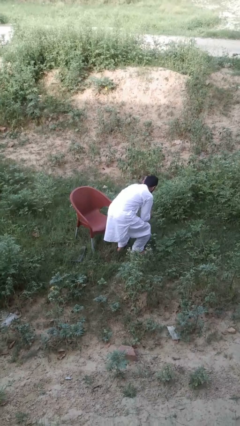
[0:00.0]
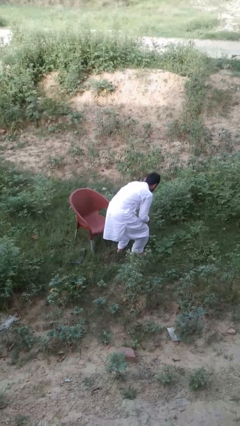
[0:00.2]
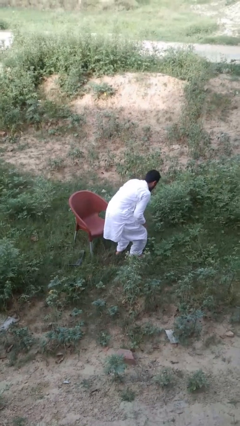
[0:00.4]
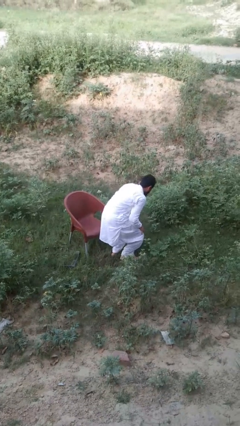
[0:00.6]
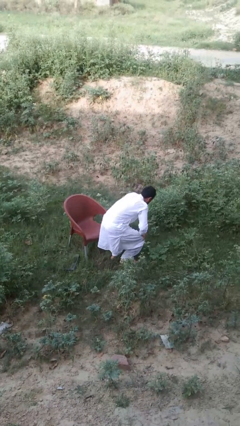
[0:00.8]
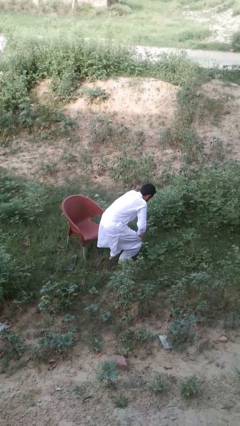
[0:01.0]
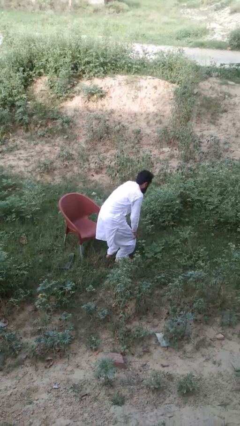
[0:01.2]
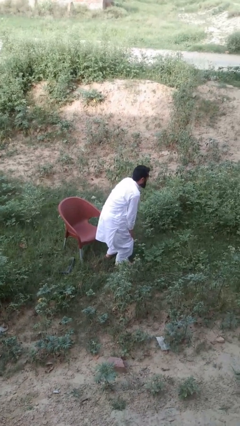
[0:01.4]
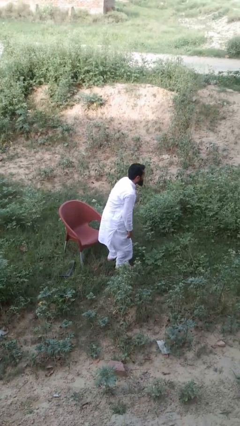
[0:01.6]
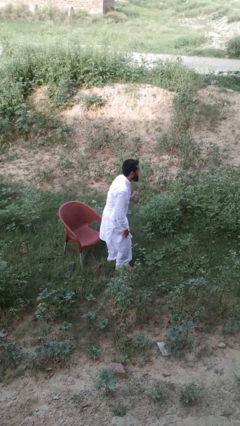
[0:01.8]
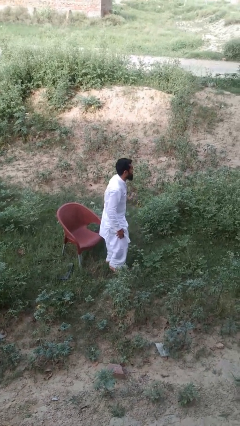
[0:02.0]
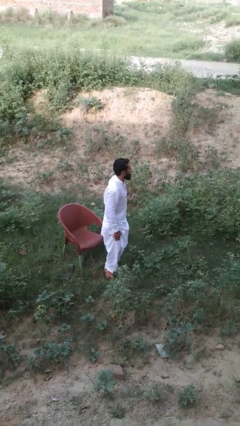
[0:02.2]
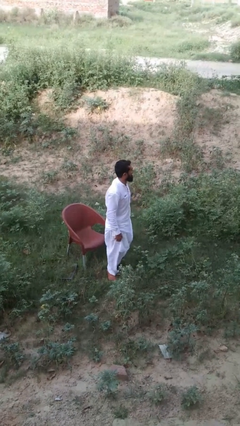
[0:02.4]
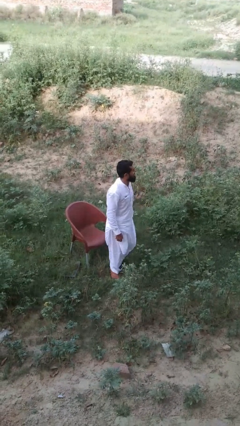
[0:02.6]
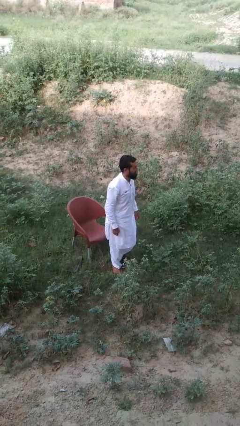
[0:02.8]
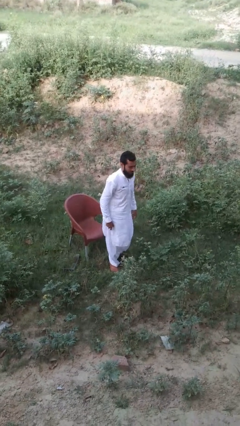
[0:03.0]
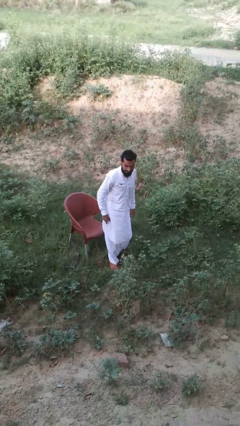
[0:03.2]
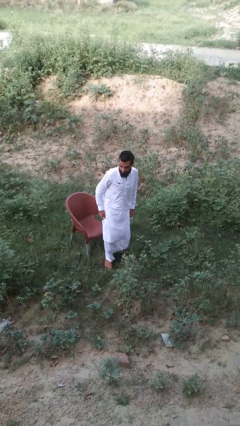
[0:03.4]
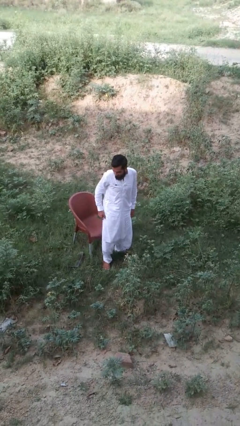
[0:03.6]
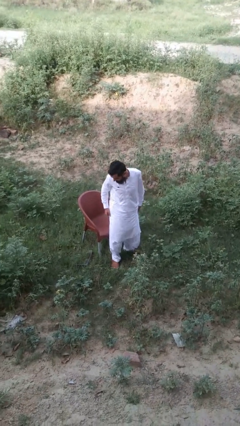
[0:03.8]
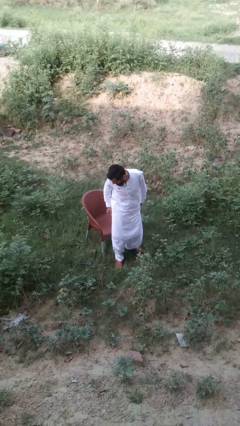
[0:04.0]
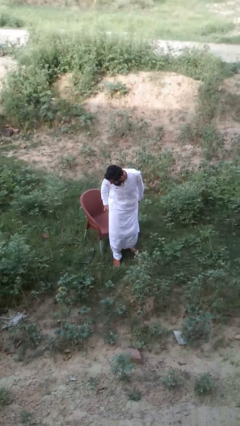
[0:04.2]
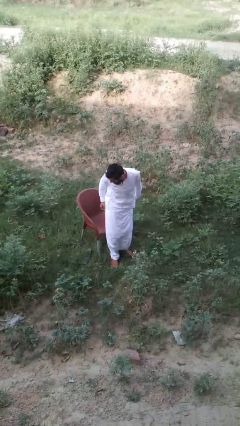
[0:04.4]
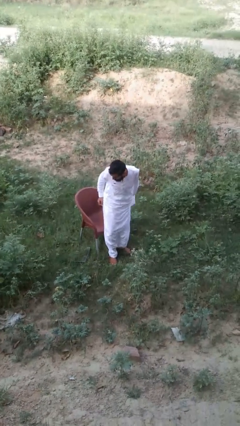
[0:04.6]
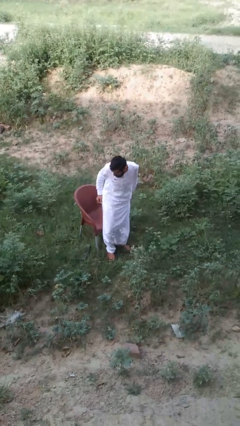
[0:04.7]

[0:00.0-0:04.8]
person stands up from floor

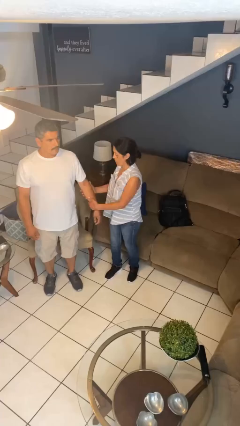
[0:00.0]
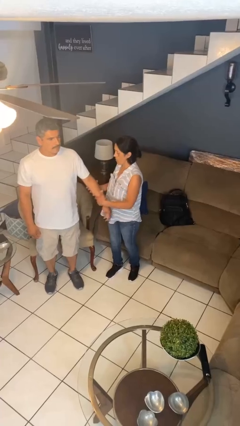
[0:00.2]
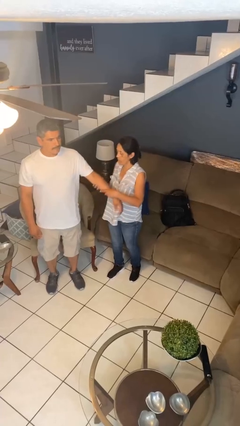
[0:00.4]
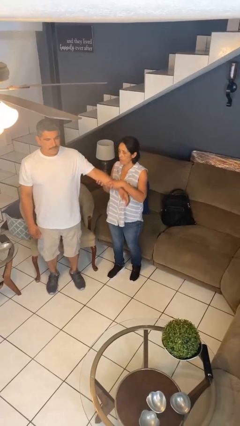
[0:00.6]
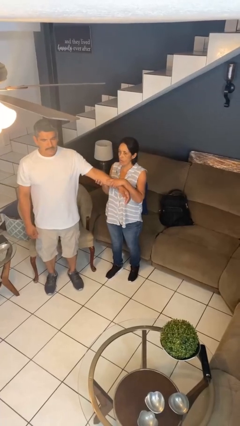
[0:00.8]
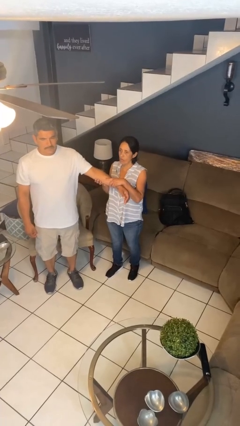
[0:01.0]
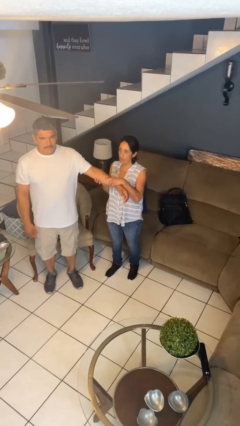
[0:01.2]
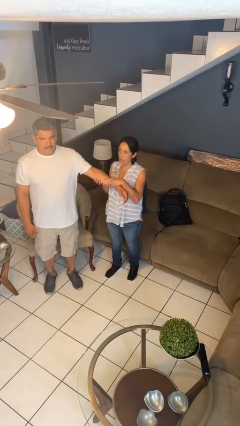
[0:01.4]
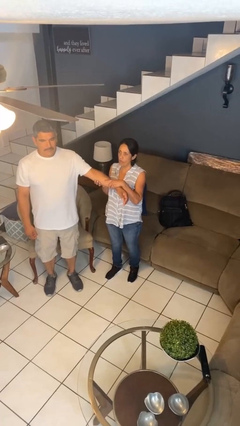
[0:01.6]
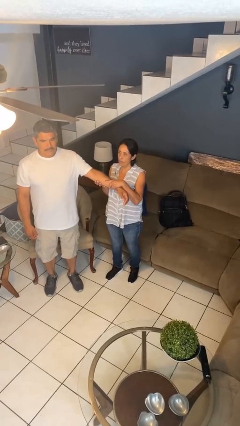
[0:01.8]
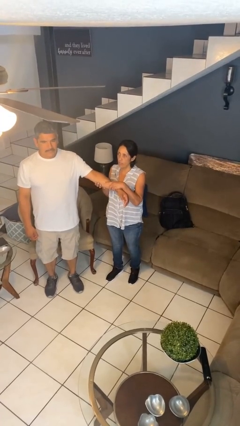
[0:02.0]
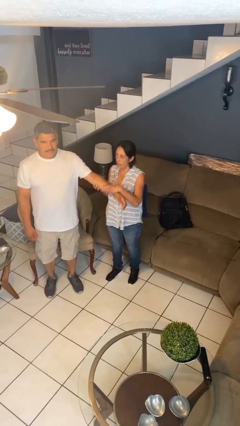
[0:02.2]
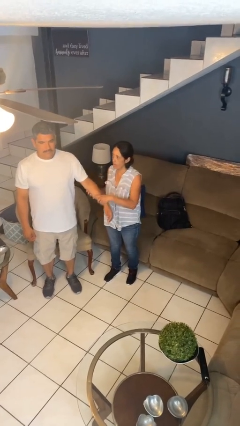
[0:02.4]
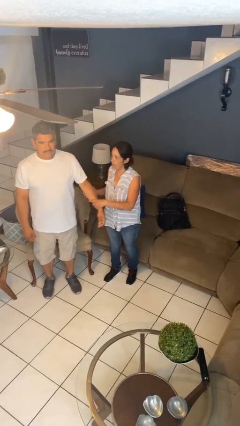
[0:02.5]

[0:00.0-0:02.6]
person grabs person by forearm

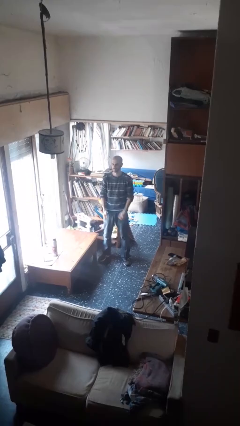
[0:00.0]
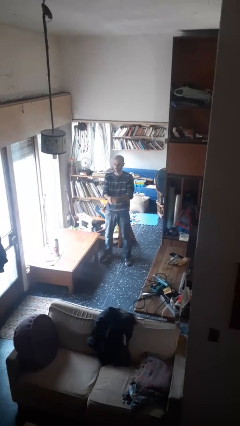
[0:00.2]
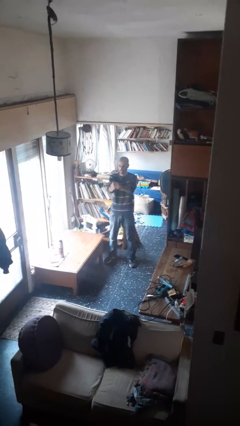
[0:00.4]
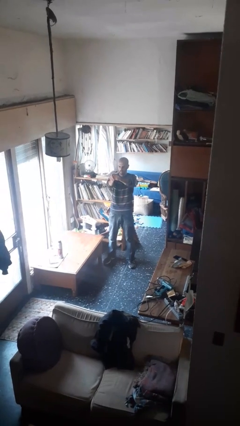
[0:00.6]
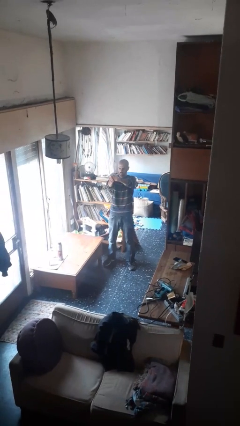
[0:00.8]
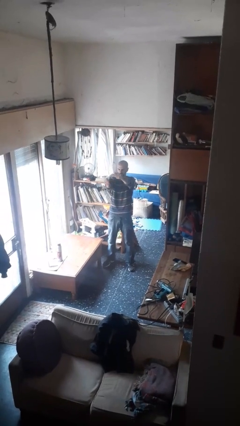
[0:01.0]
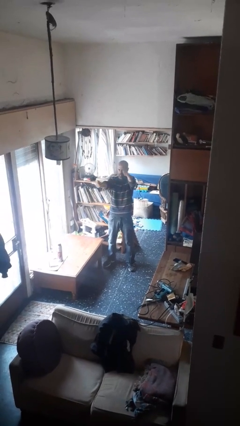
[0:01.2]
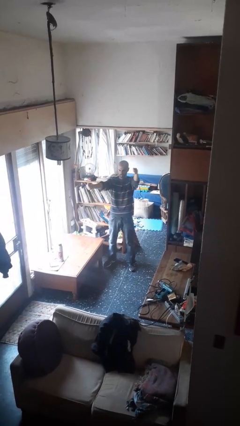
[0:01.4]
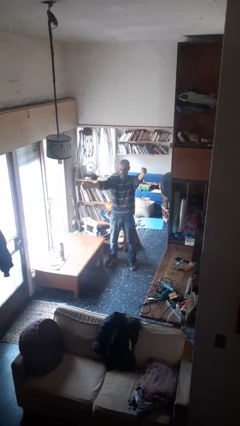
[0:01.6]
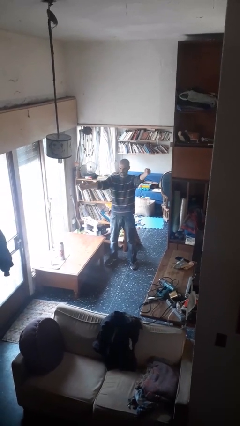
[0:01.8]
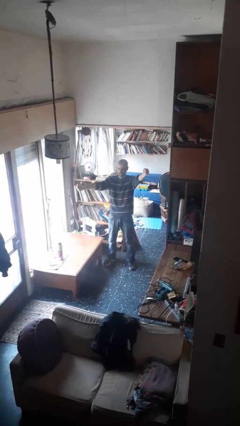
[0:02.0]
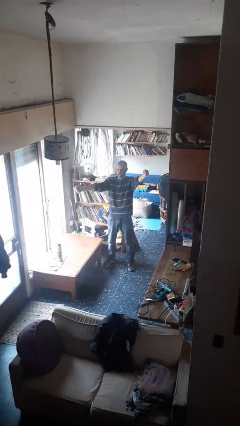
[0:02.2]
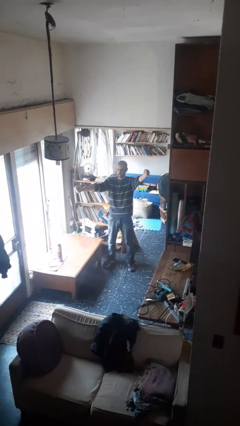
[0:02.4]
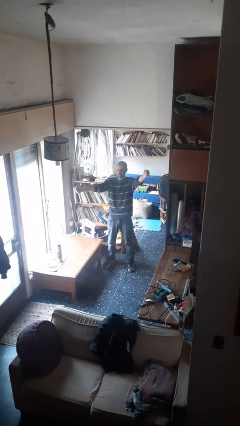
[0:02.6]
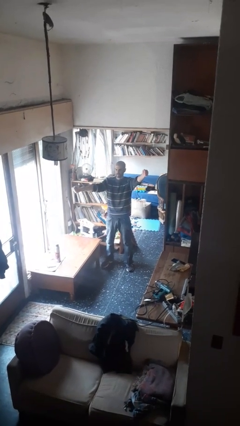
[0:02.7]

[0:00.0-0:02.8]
person gestures zoom in

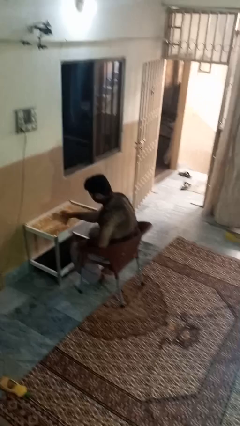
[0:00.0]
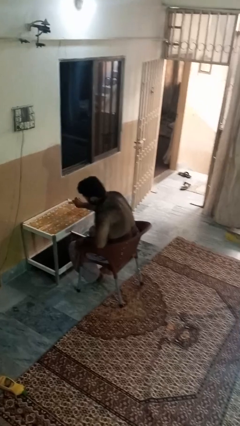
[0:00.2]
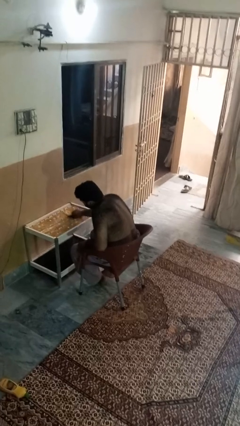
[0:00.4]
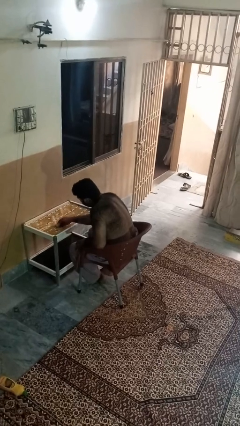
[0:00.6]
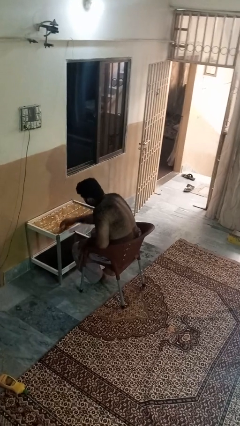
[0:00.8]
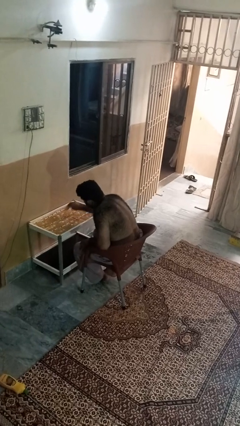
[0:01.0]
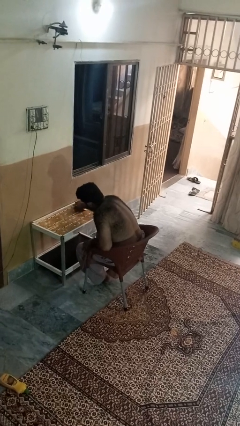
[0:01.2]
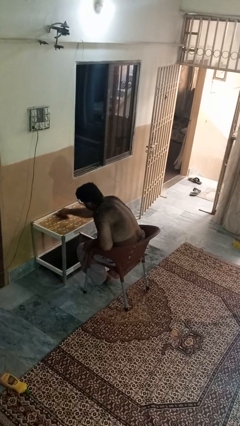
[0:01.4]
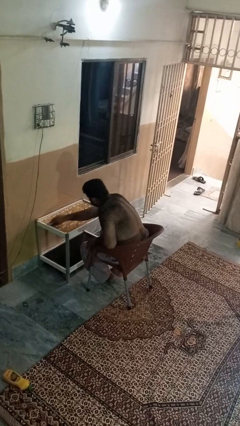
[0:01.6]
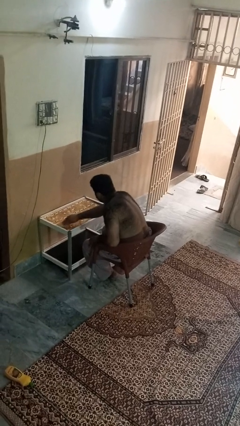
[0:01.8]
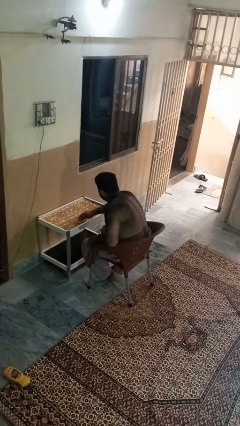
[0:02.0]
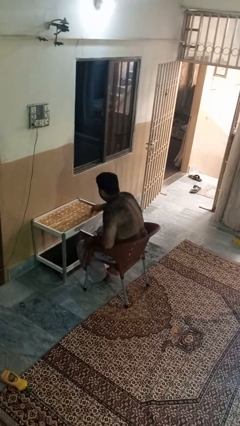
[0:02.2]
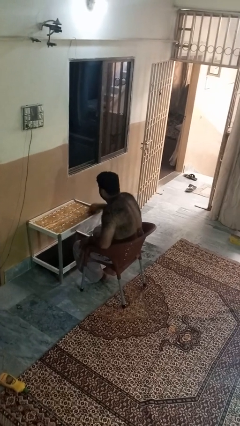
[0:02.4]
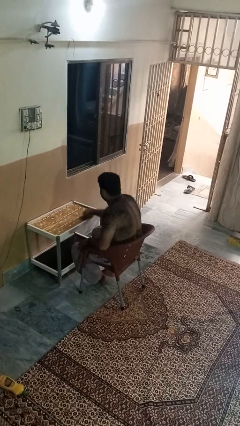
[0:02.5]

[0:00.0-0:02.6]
person cleans table with rag

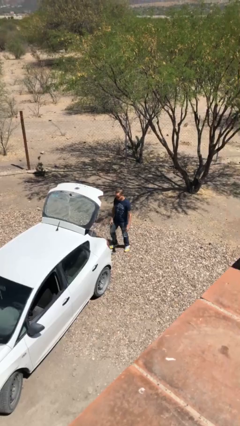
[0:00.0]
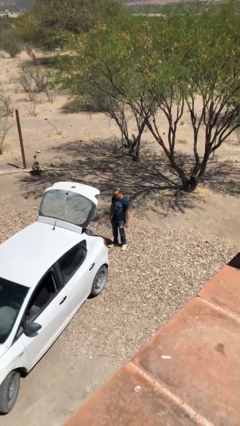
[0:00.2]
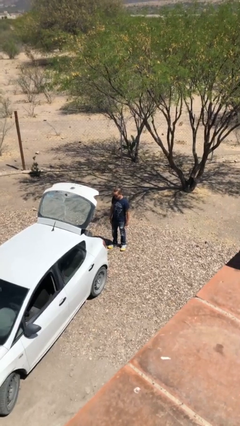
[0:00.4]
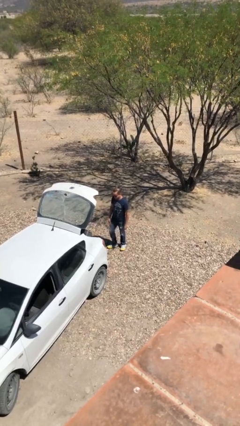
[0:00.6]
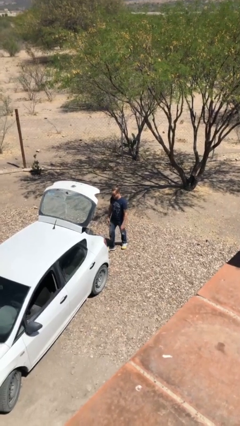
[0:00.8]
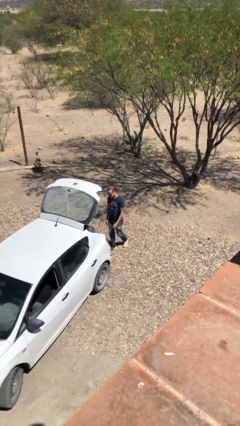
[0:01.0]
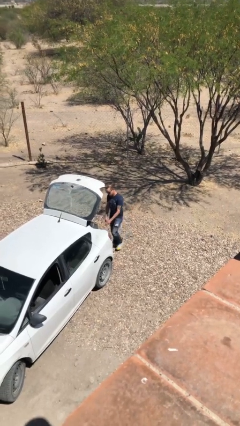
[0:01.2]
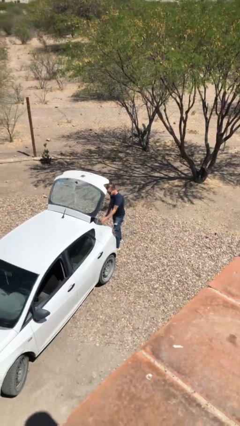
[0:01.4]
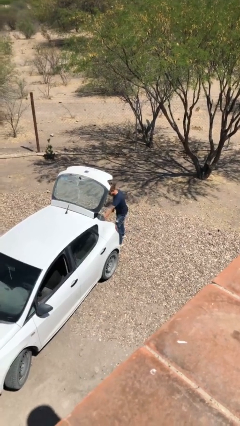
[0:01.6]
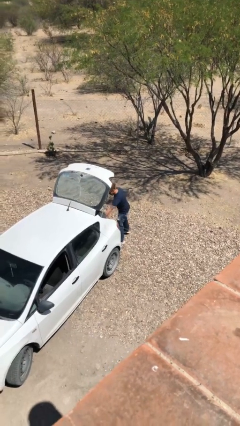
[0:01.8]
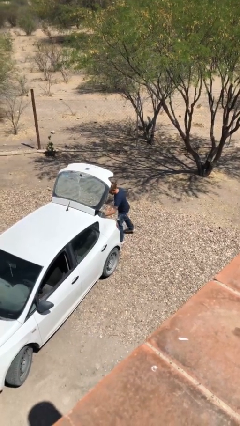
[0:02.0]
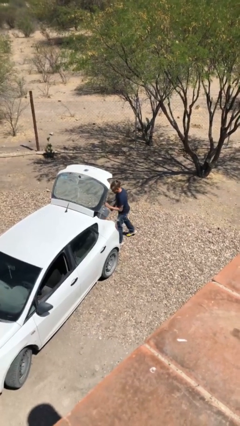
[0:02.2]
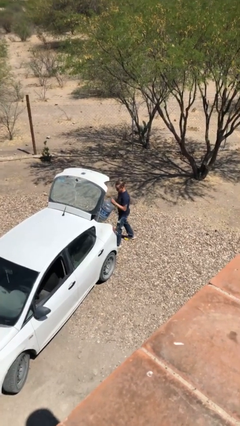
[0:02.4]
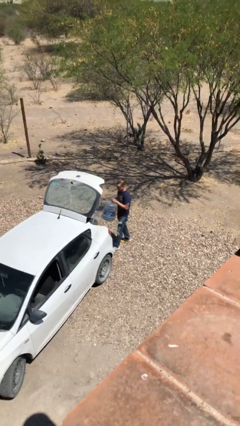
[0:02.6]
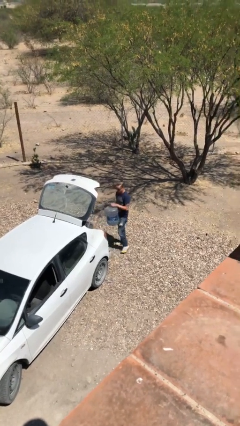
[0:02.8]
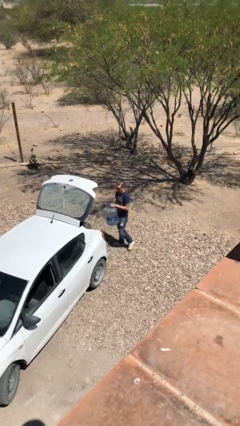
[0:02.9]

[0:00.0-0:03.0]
person unloads car

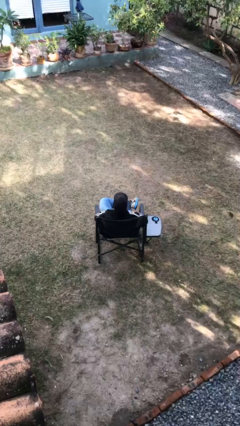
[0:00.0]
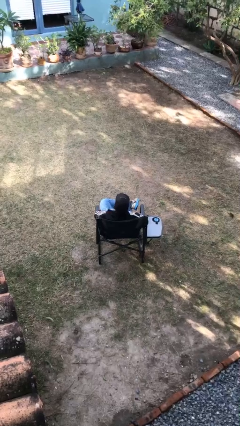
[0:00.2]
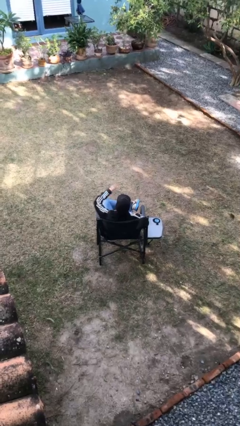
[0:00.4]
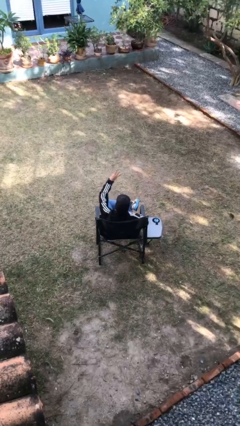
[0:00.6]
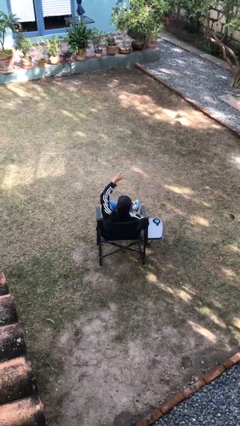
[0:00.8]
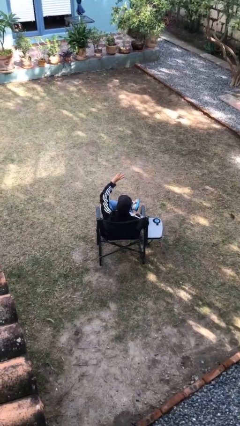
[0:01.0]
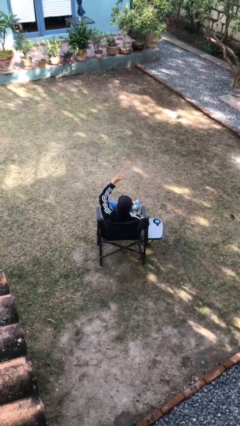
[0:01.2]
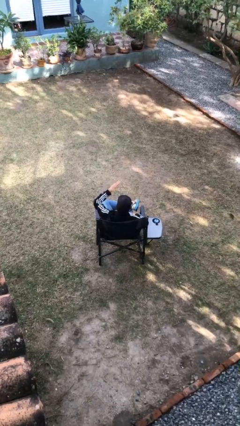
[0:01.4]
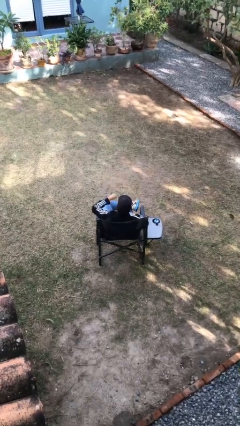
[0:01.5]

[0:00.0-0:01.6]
person gestures number three
